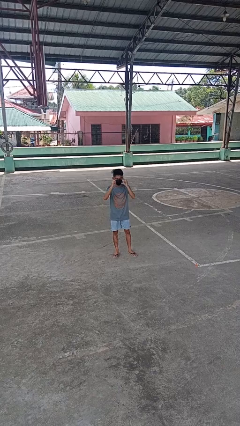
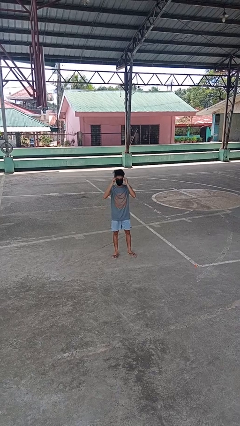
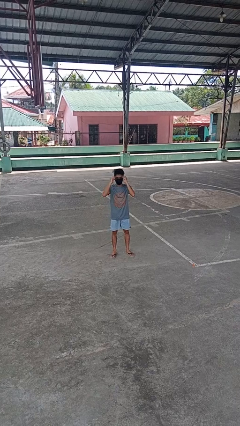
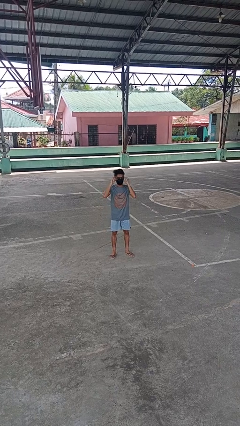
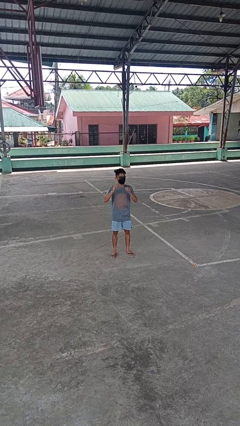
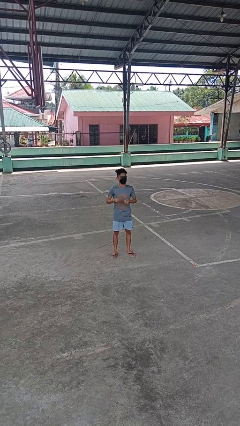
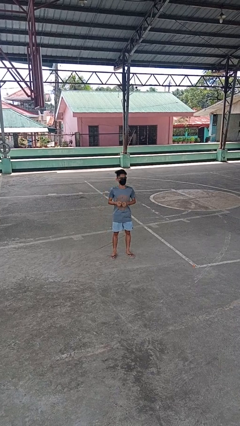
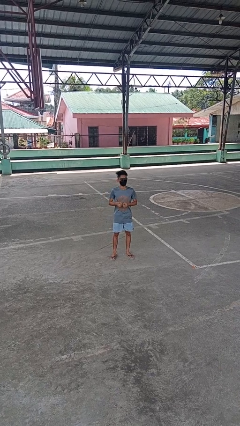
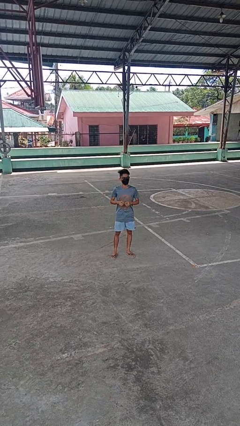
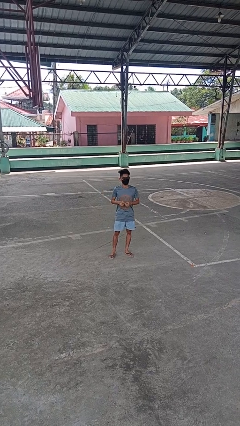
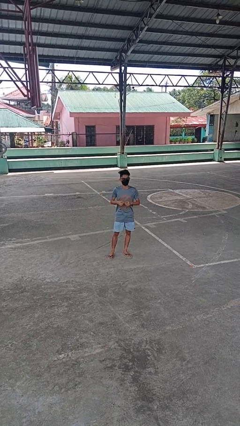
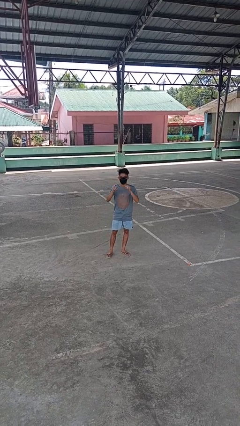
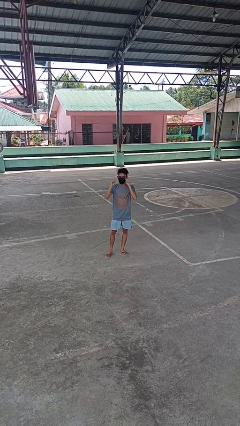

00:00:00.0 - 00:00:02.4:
person puts on glasses

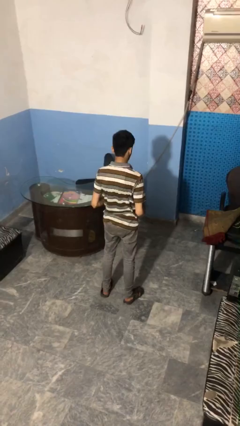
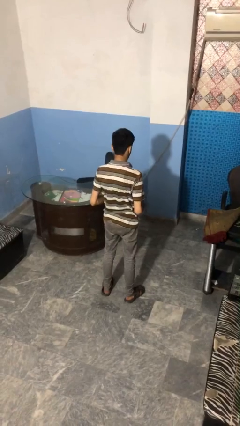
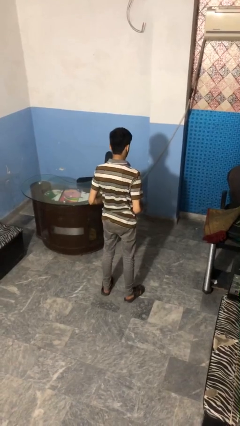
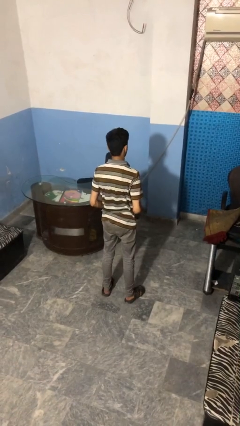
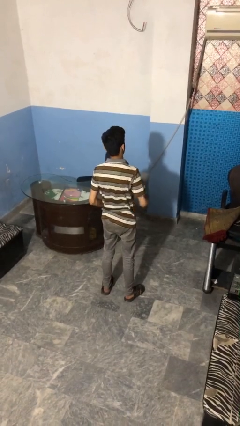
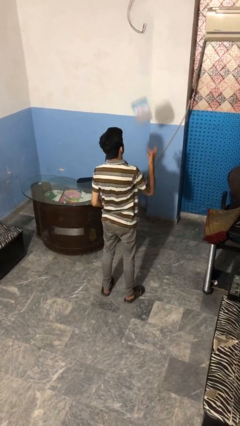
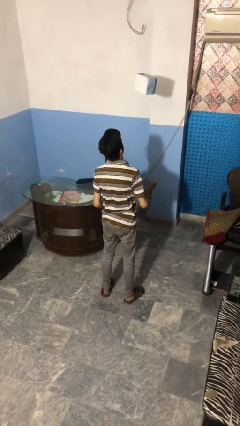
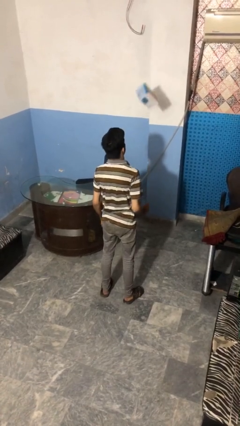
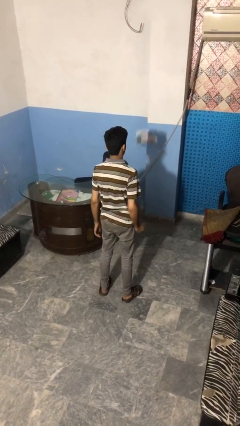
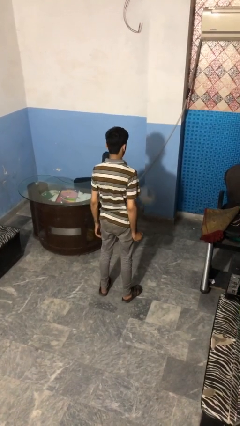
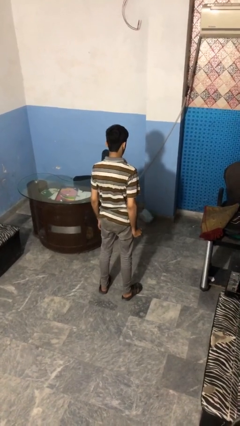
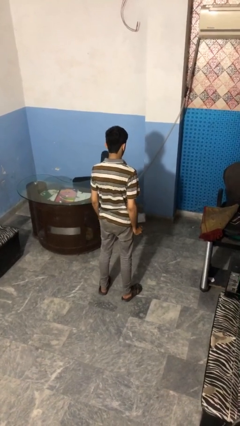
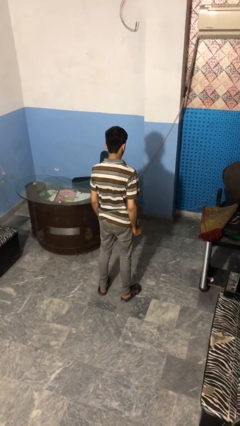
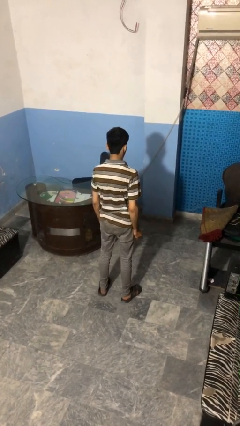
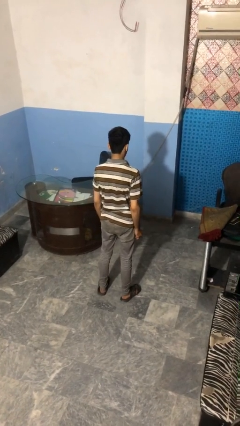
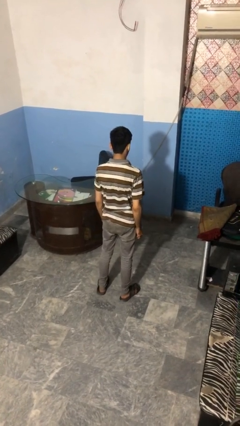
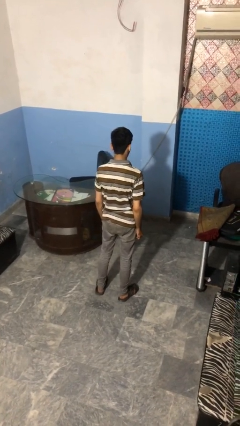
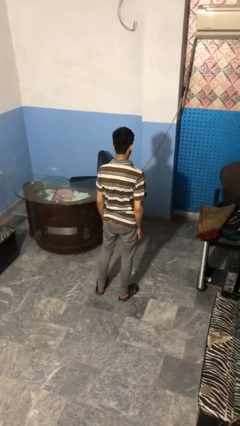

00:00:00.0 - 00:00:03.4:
person throws object into air

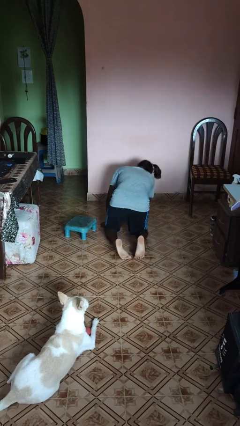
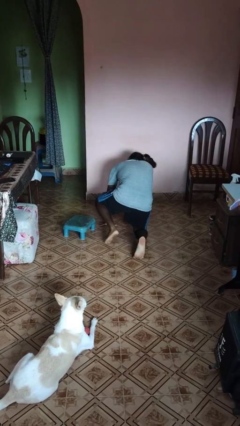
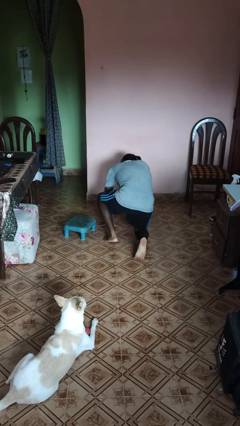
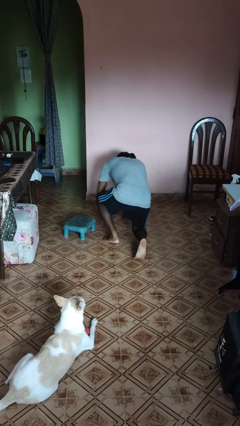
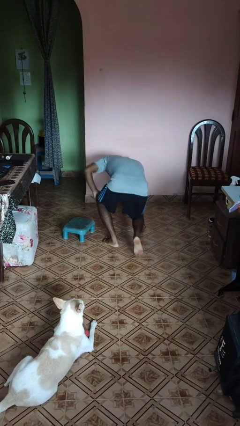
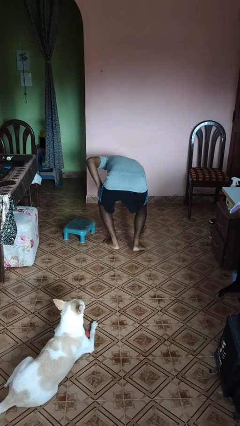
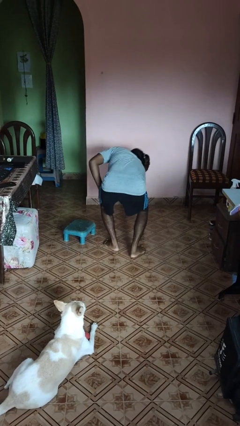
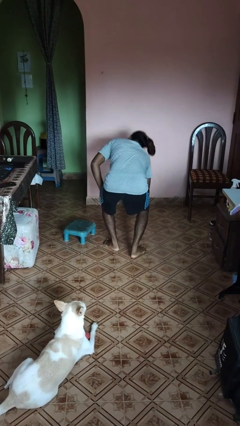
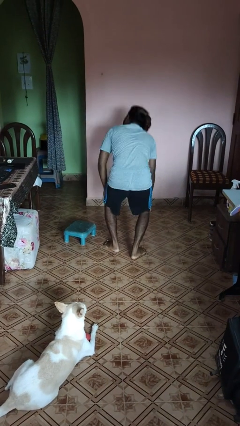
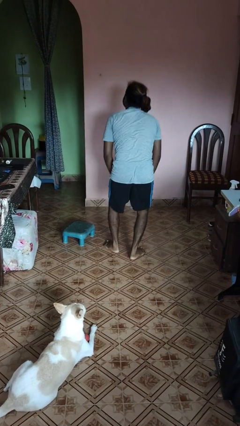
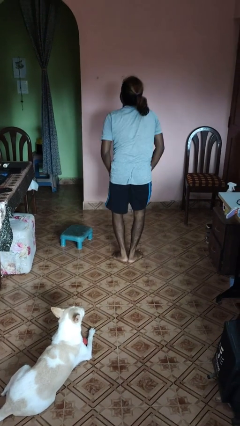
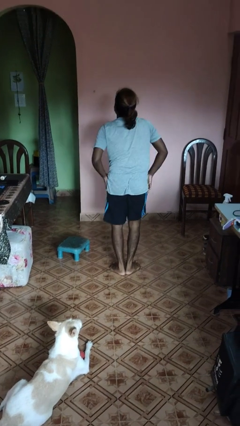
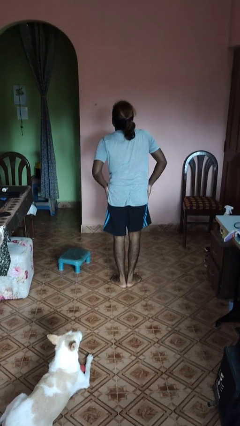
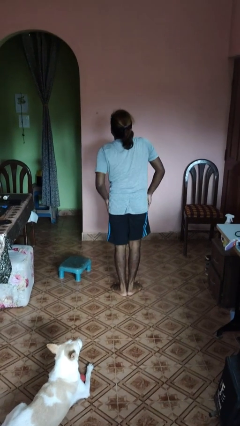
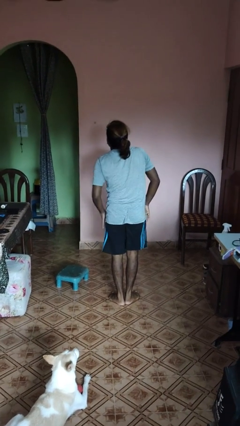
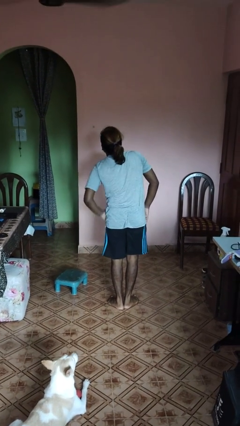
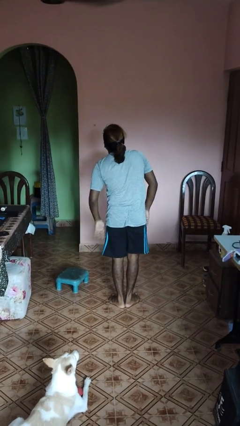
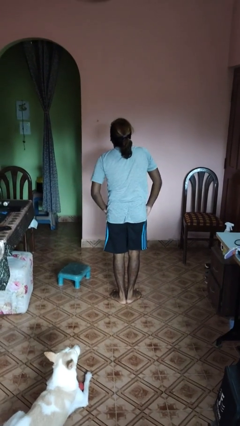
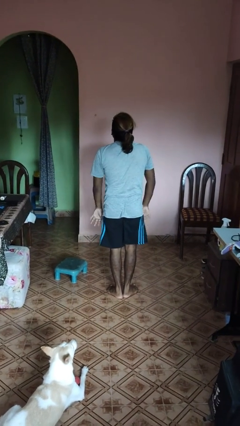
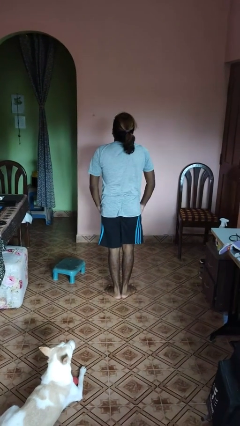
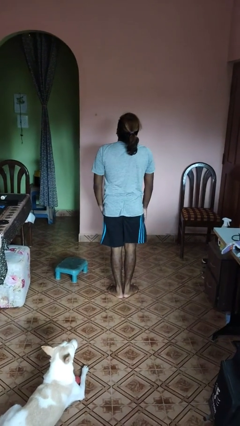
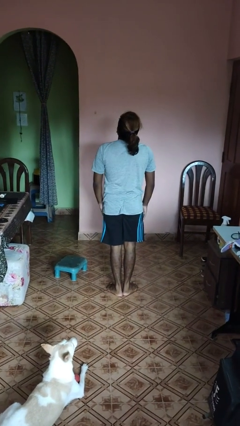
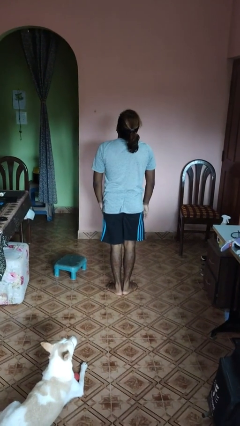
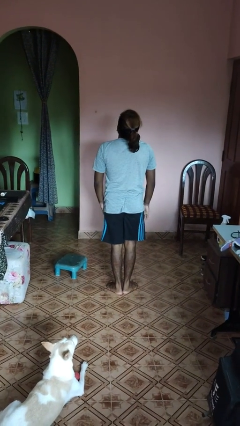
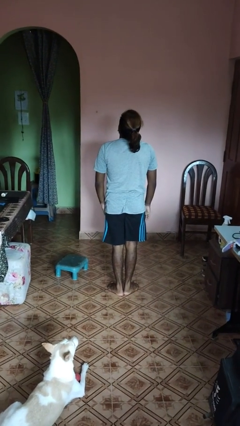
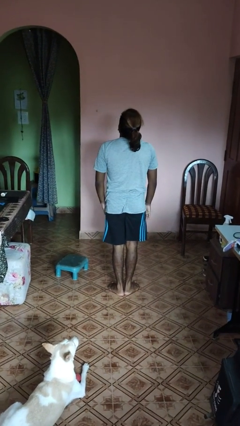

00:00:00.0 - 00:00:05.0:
person stands up from floor

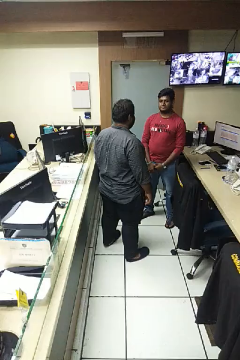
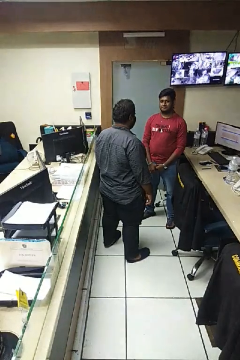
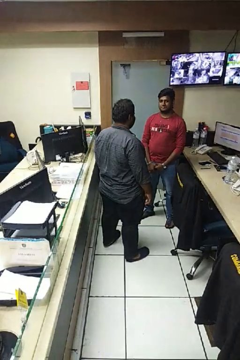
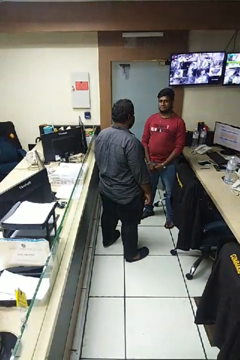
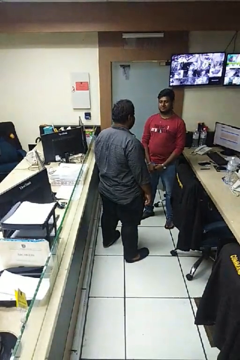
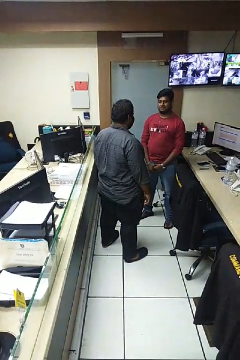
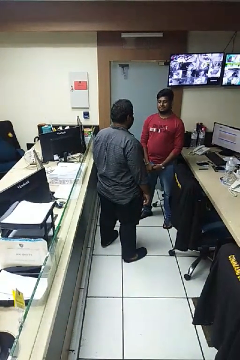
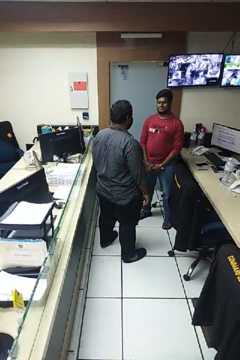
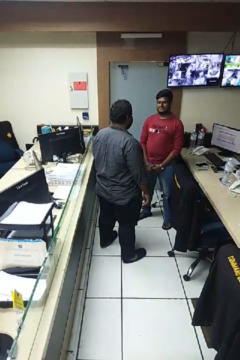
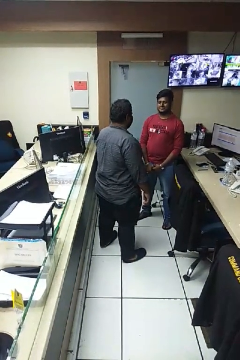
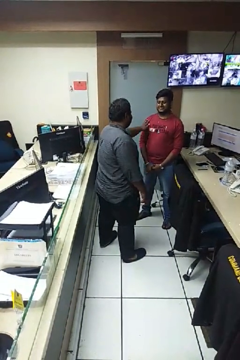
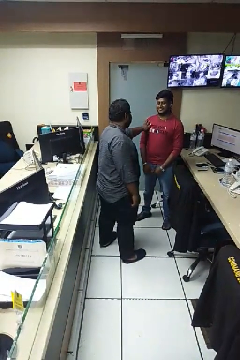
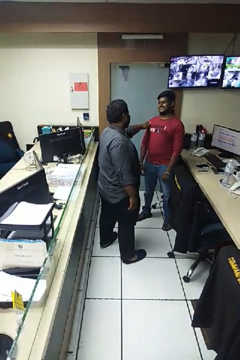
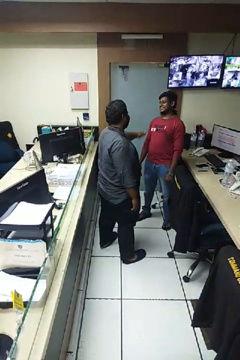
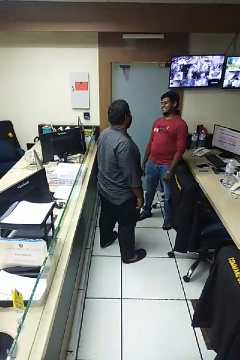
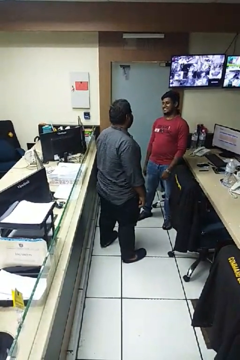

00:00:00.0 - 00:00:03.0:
person shoves person

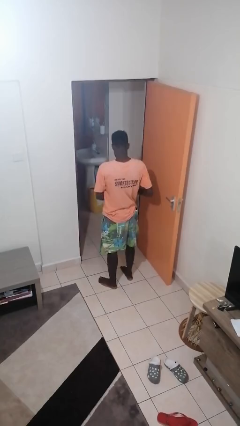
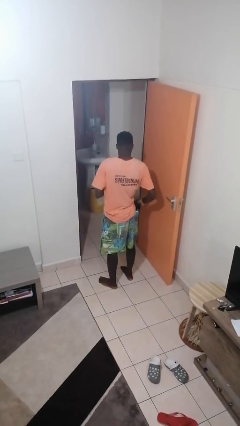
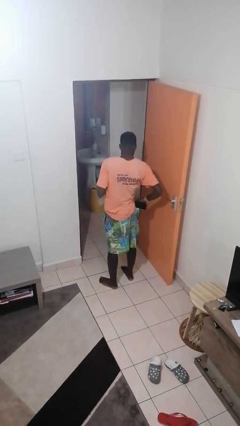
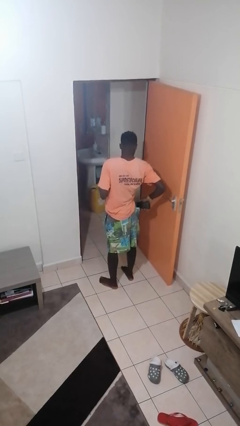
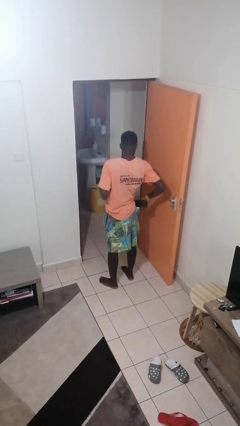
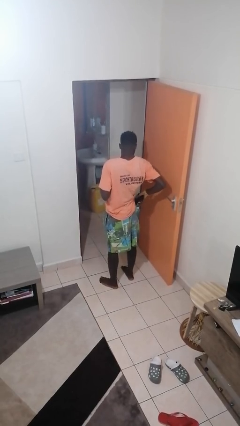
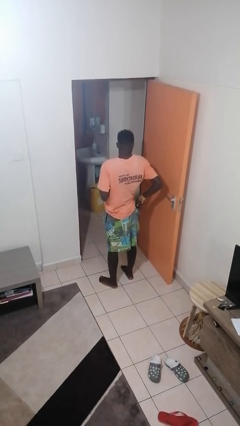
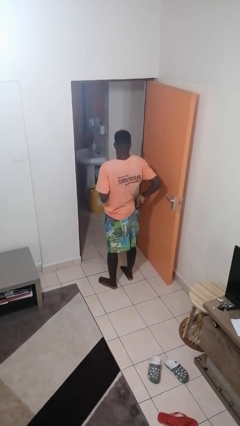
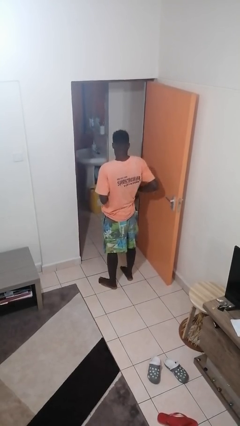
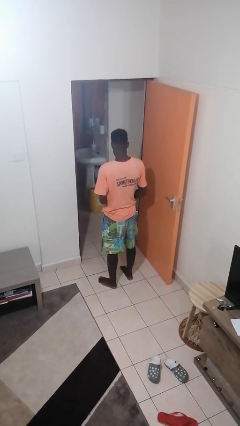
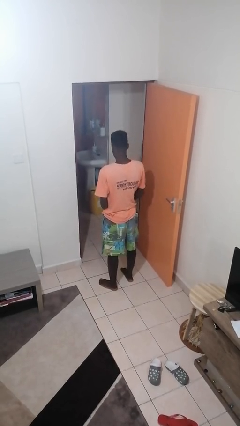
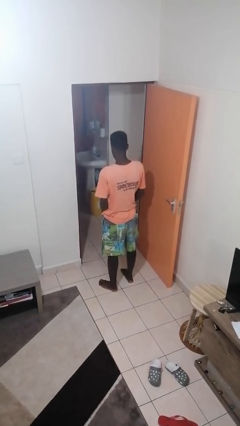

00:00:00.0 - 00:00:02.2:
person puts phone into pocket

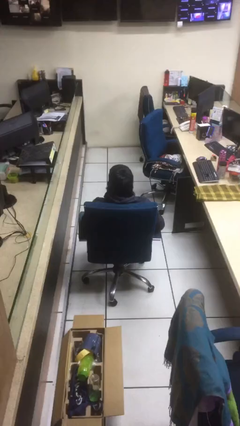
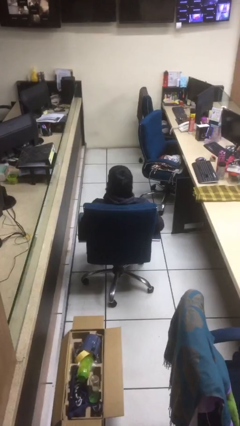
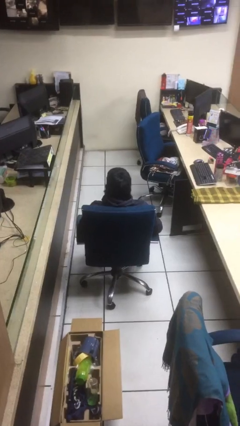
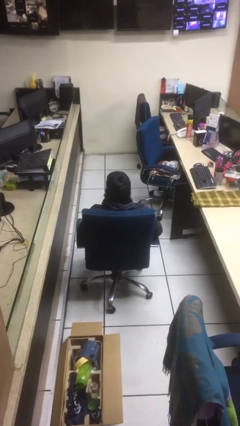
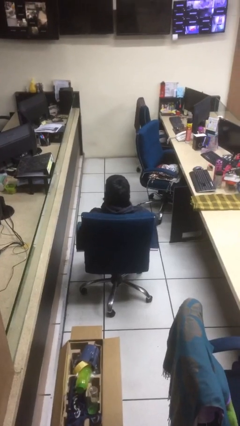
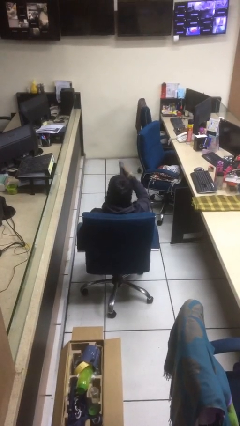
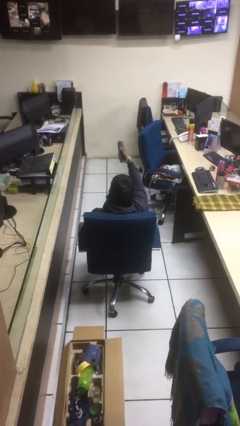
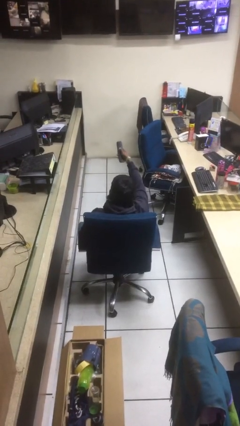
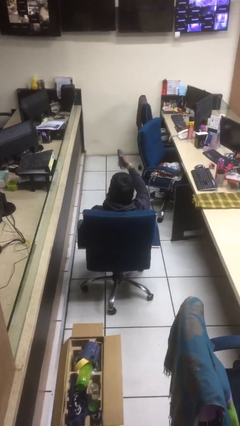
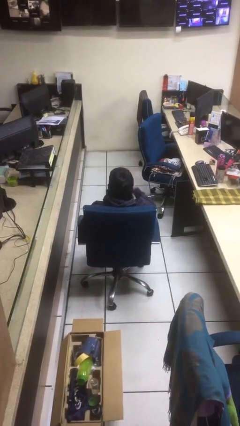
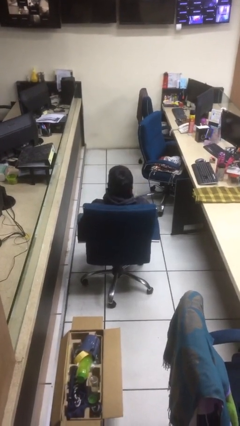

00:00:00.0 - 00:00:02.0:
person uses television remote
